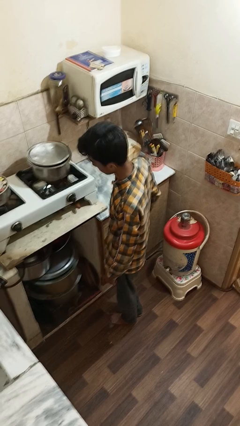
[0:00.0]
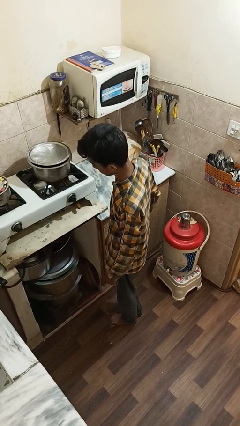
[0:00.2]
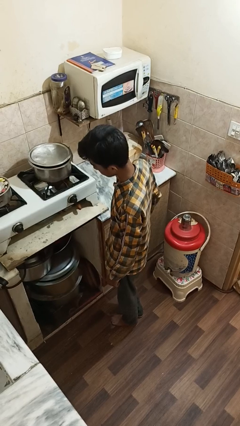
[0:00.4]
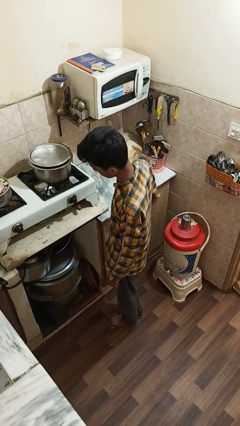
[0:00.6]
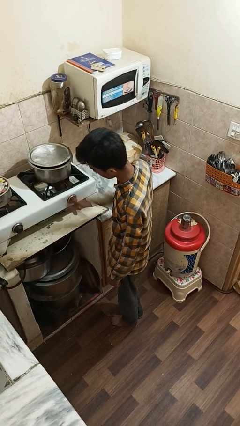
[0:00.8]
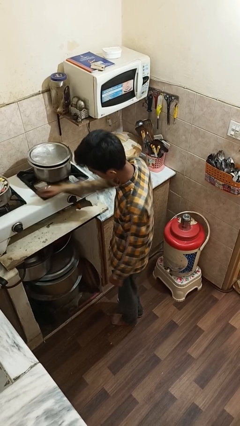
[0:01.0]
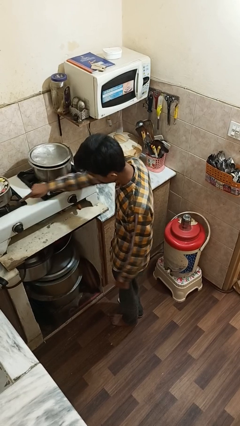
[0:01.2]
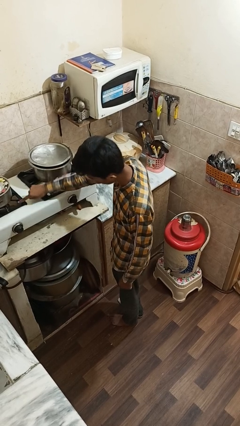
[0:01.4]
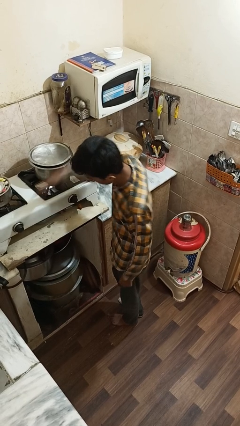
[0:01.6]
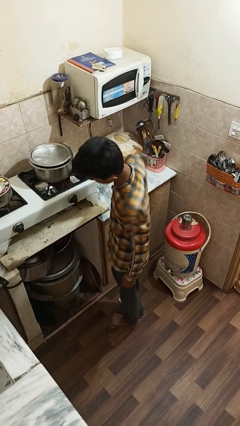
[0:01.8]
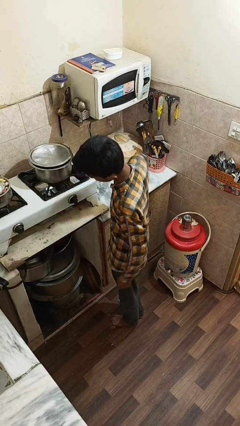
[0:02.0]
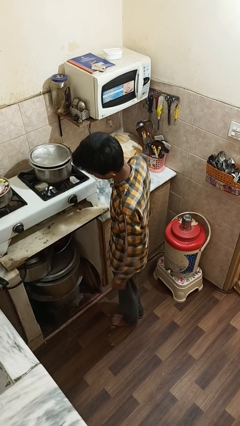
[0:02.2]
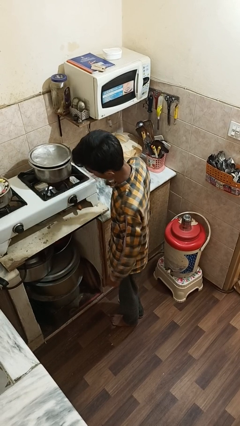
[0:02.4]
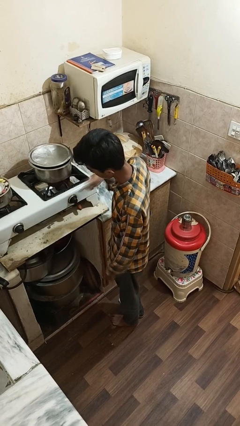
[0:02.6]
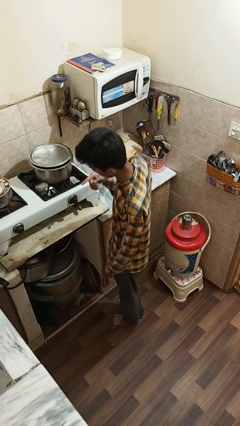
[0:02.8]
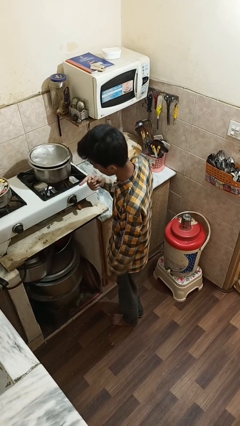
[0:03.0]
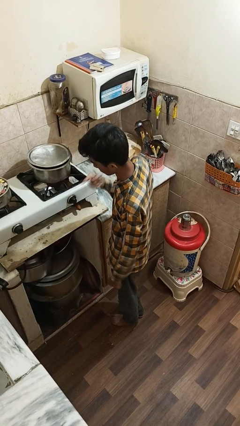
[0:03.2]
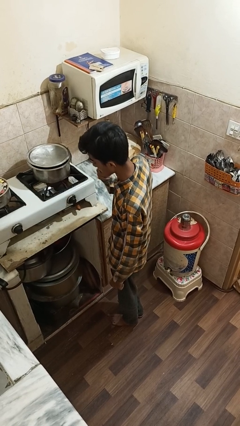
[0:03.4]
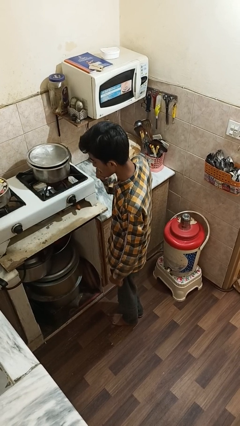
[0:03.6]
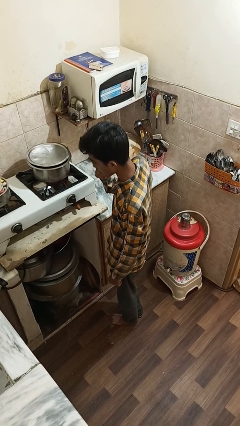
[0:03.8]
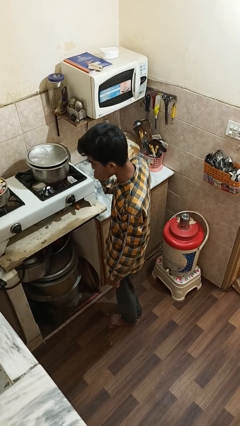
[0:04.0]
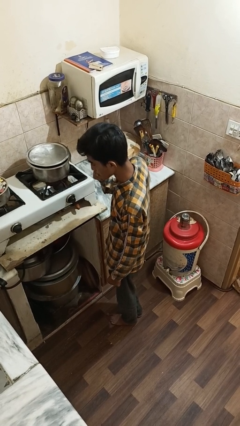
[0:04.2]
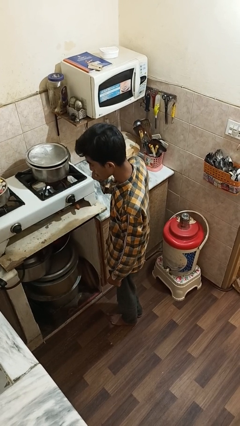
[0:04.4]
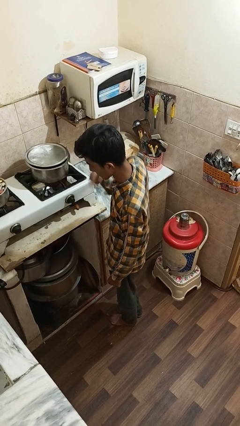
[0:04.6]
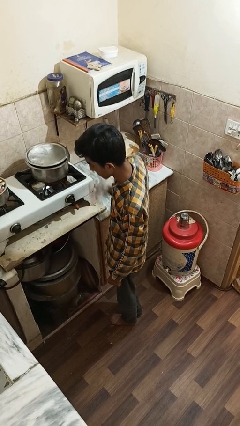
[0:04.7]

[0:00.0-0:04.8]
person burns hand

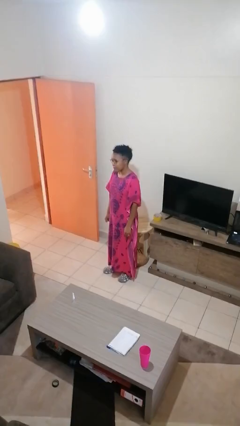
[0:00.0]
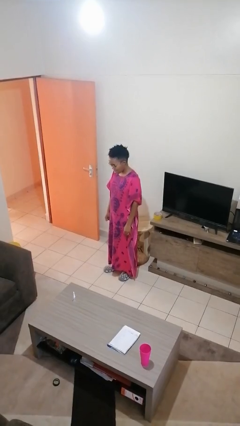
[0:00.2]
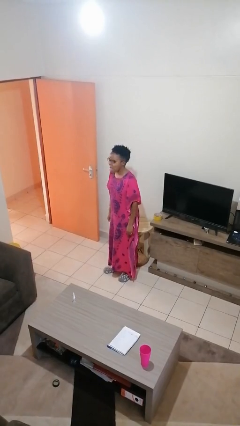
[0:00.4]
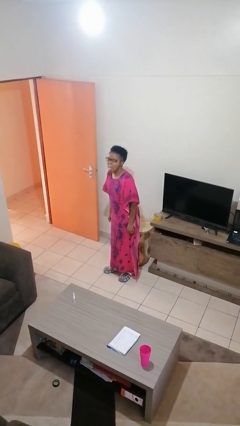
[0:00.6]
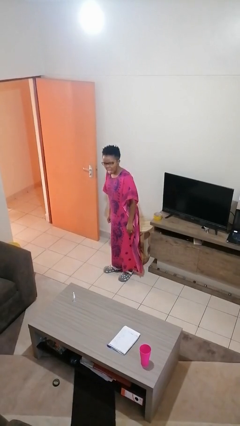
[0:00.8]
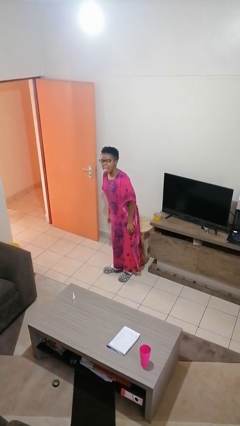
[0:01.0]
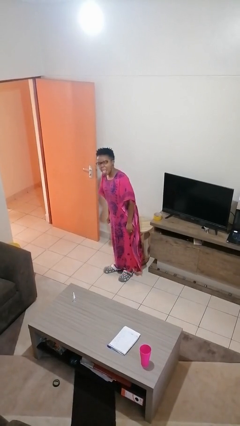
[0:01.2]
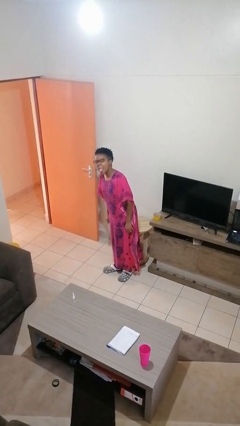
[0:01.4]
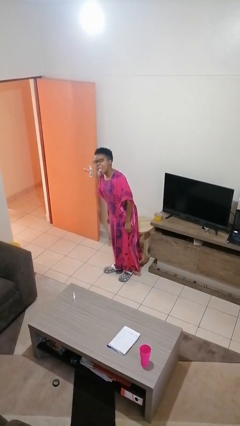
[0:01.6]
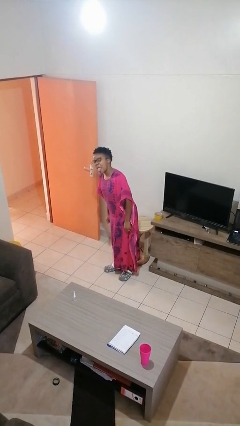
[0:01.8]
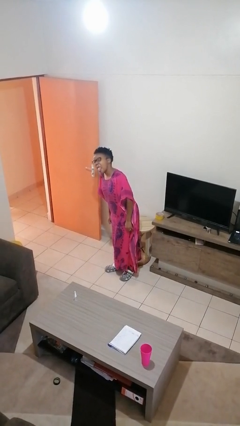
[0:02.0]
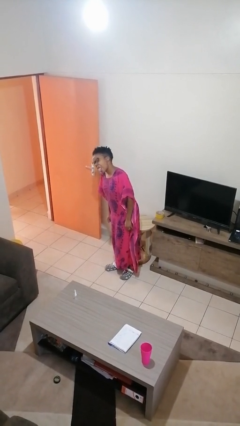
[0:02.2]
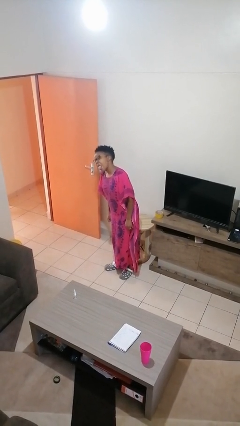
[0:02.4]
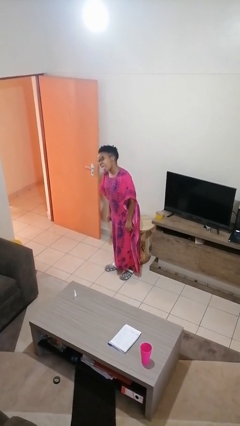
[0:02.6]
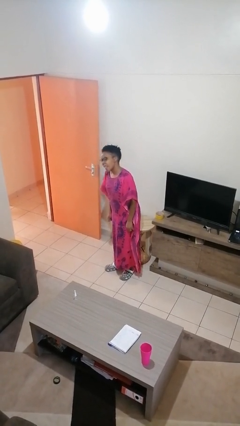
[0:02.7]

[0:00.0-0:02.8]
person sticks out tongue

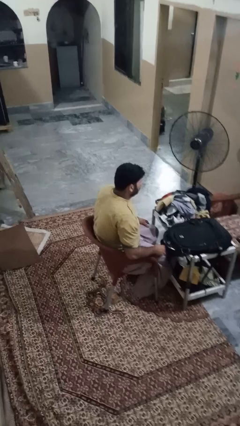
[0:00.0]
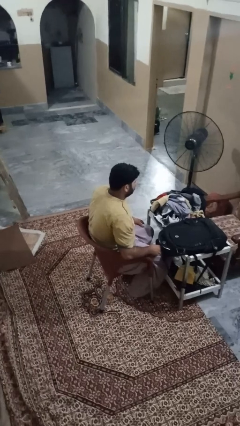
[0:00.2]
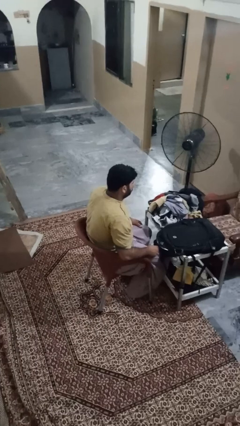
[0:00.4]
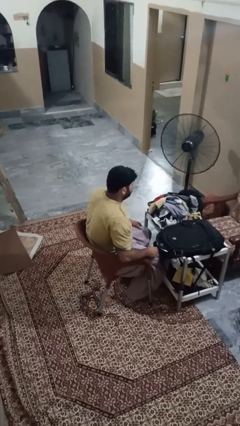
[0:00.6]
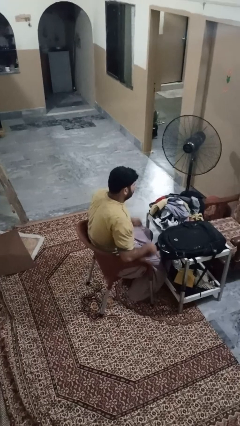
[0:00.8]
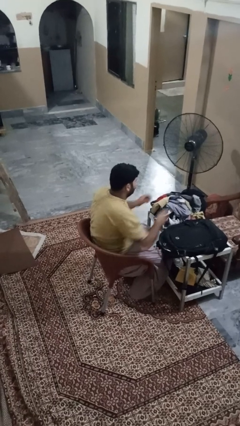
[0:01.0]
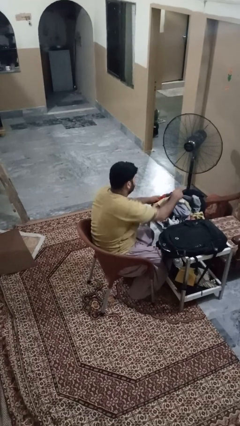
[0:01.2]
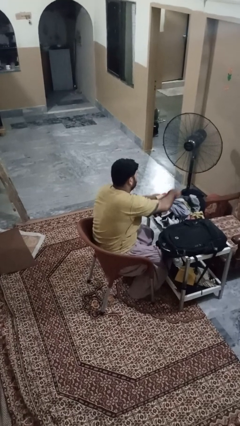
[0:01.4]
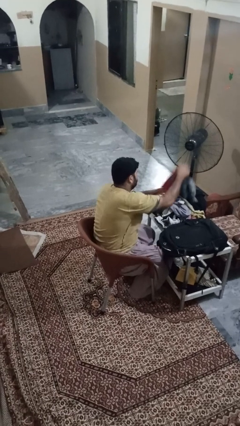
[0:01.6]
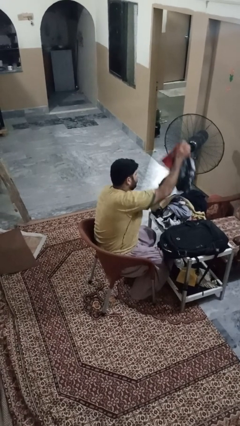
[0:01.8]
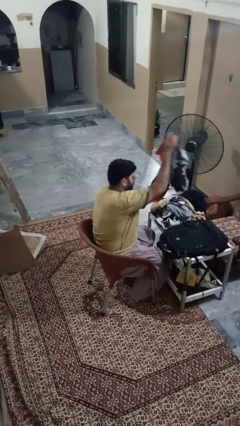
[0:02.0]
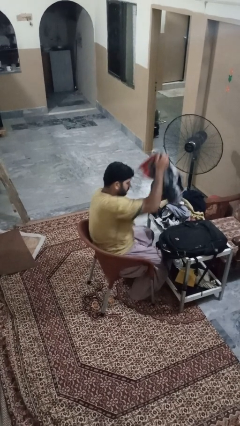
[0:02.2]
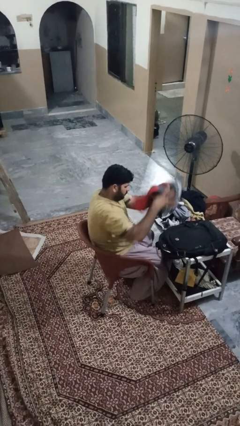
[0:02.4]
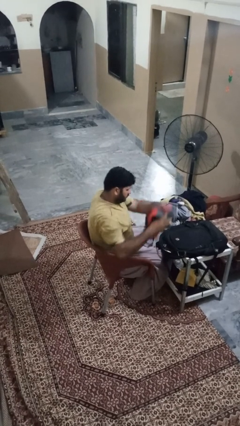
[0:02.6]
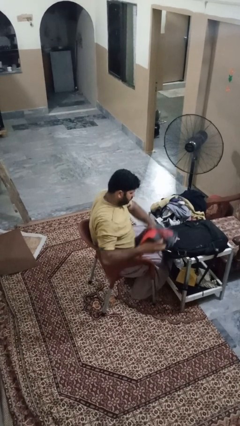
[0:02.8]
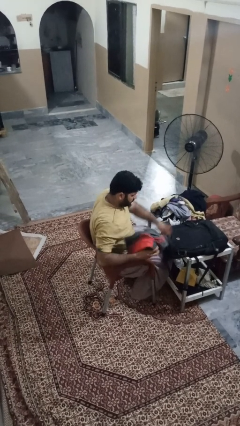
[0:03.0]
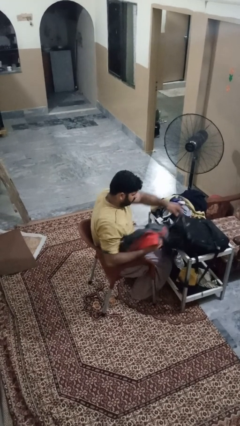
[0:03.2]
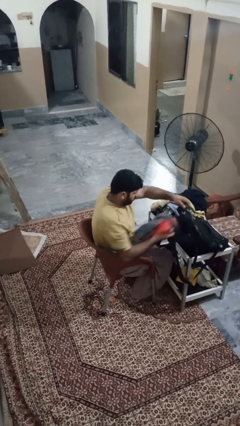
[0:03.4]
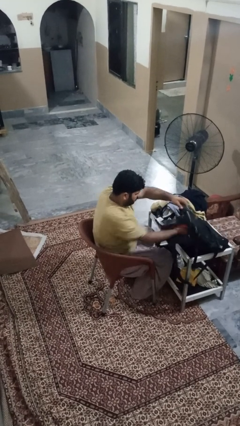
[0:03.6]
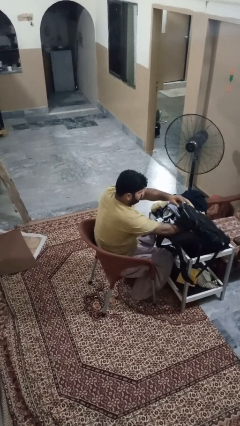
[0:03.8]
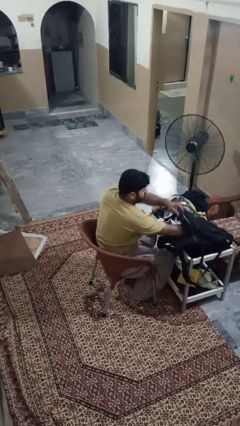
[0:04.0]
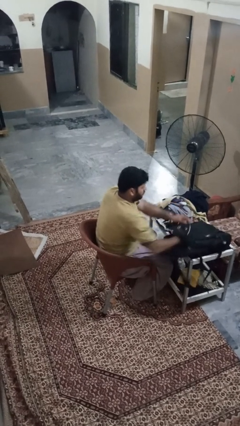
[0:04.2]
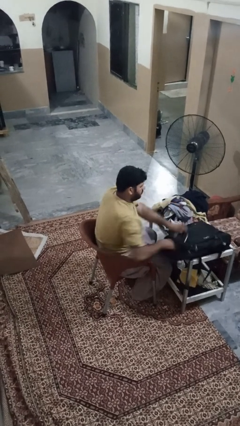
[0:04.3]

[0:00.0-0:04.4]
person loads clothes into suitcase

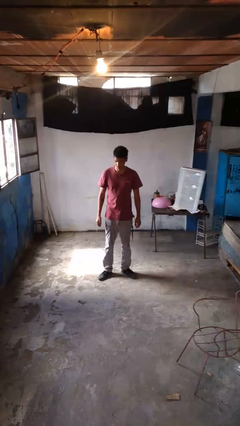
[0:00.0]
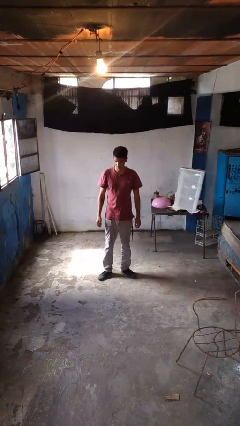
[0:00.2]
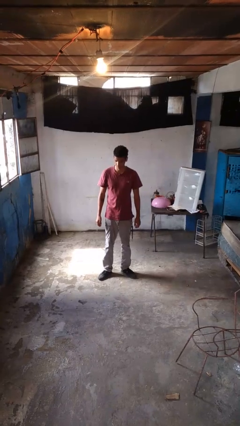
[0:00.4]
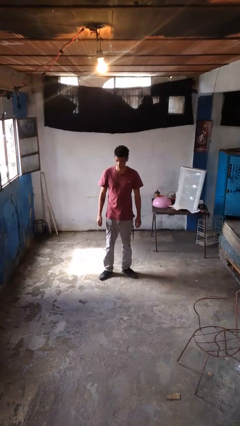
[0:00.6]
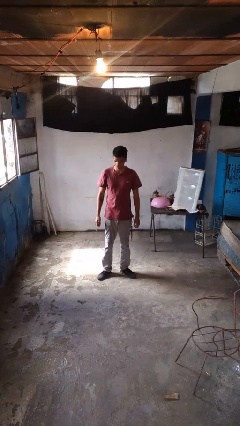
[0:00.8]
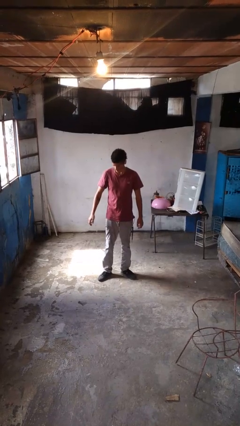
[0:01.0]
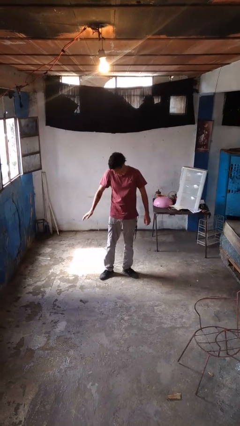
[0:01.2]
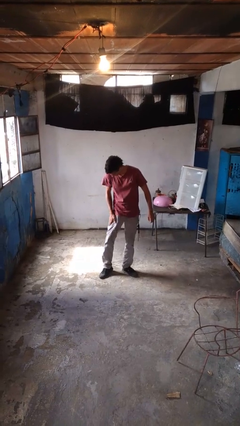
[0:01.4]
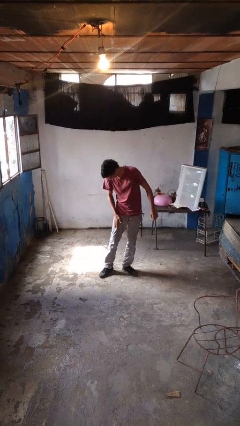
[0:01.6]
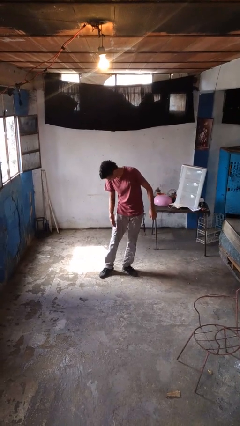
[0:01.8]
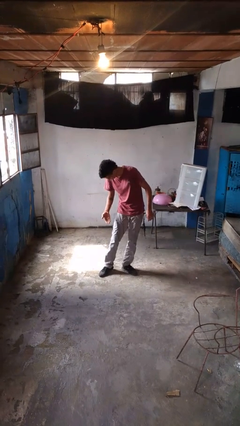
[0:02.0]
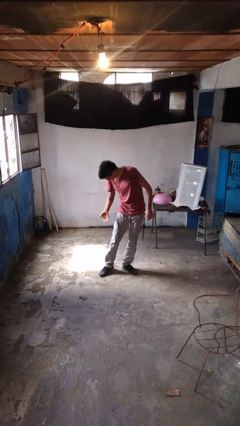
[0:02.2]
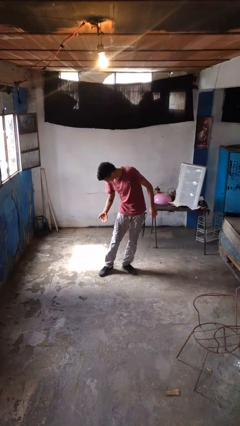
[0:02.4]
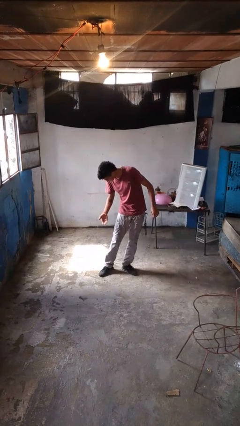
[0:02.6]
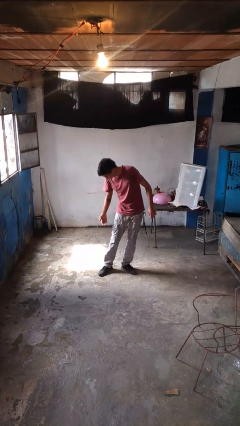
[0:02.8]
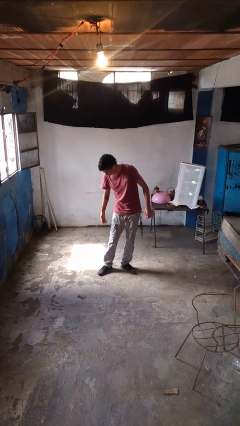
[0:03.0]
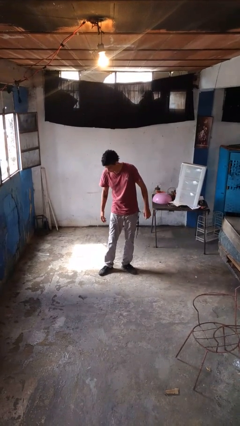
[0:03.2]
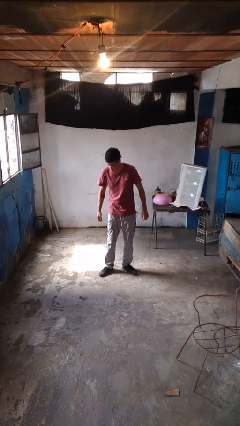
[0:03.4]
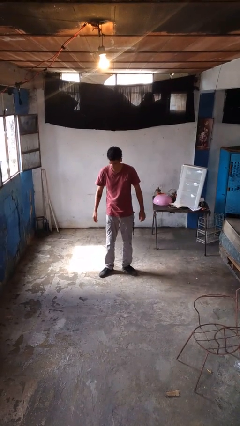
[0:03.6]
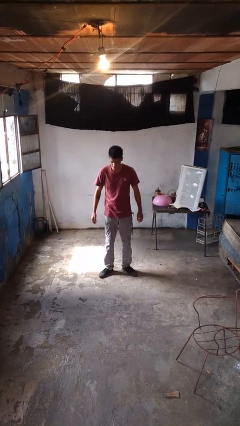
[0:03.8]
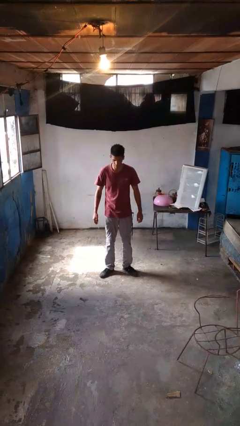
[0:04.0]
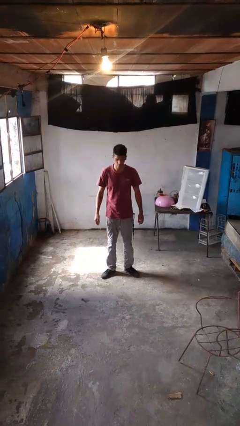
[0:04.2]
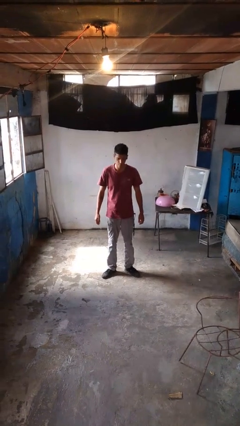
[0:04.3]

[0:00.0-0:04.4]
person swats bug

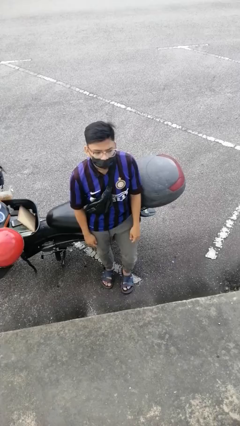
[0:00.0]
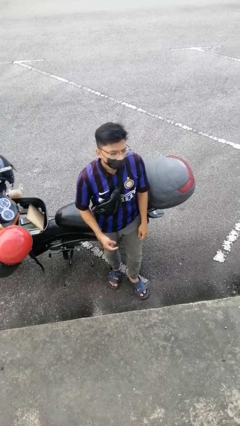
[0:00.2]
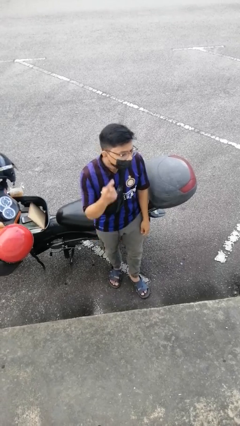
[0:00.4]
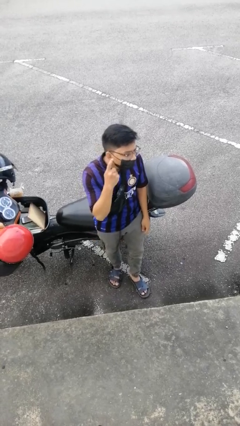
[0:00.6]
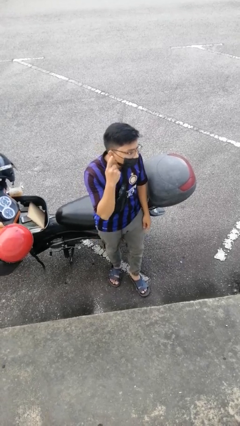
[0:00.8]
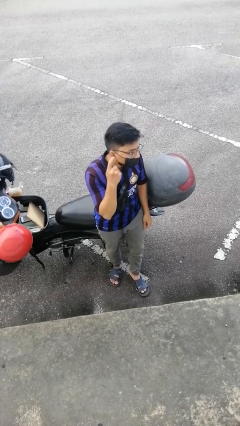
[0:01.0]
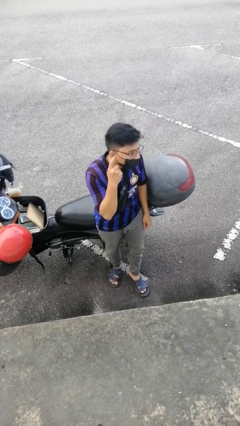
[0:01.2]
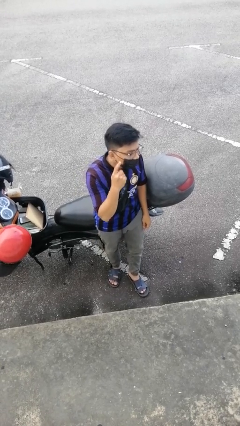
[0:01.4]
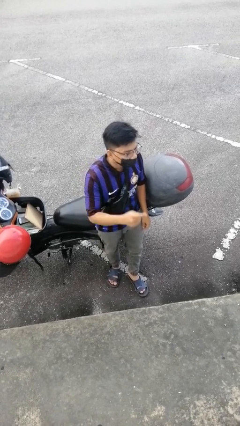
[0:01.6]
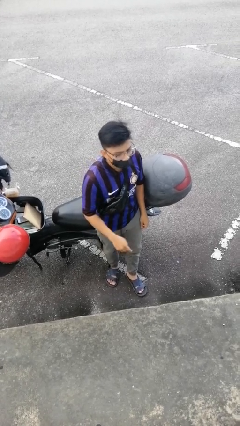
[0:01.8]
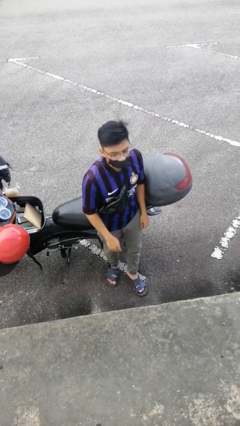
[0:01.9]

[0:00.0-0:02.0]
person gestures listen closely
